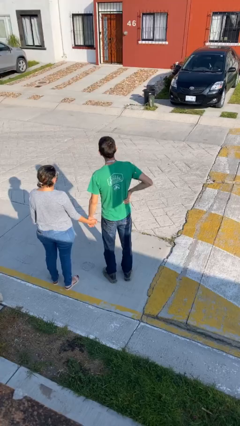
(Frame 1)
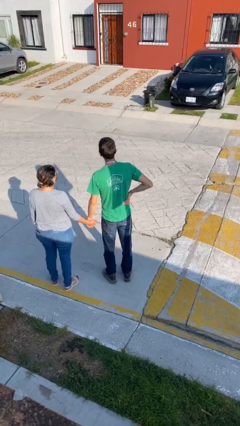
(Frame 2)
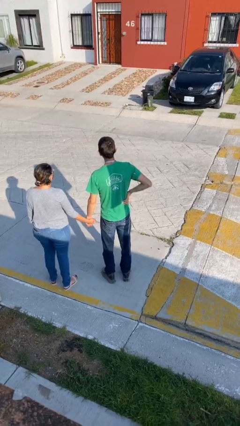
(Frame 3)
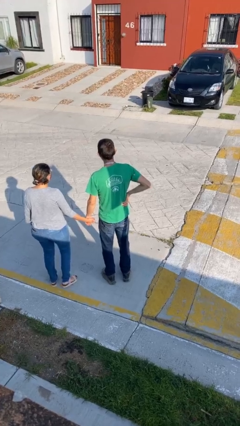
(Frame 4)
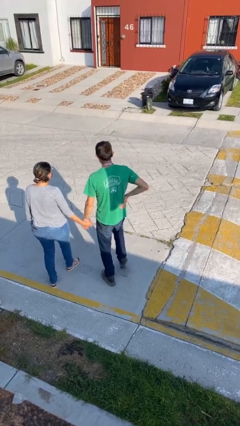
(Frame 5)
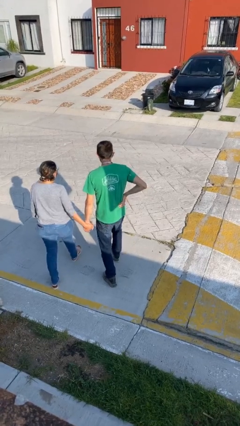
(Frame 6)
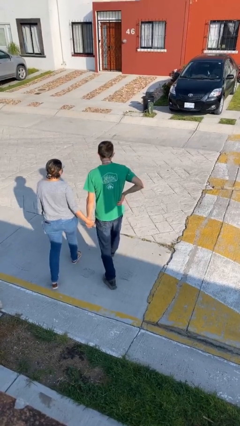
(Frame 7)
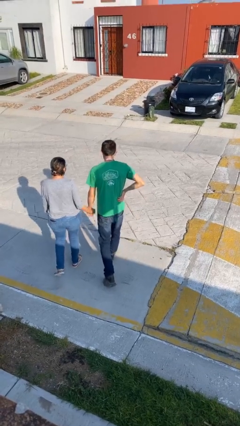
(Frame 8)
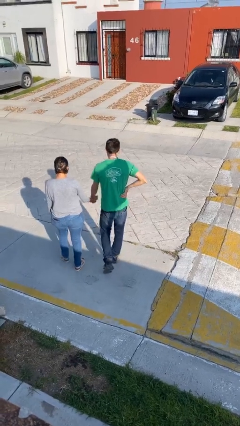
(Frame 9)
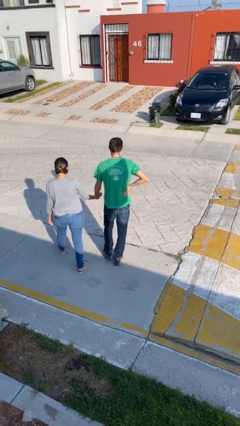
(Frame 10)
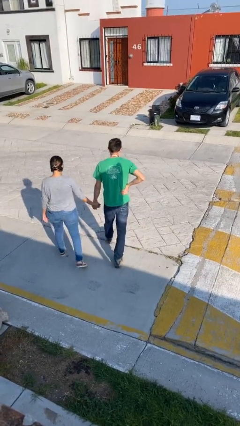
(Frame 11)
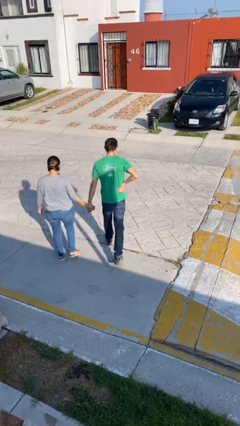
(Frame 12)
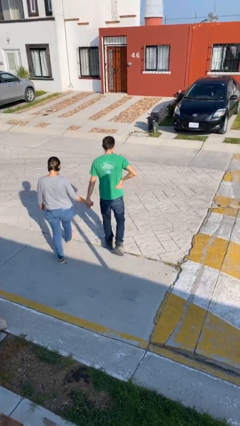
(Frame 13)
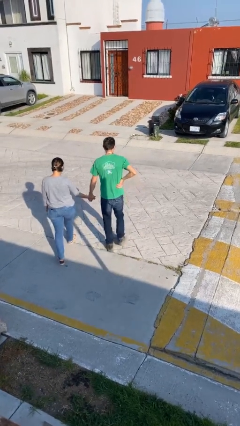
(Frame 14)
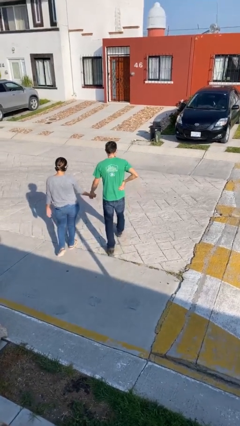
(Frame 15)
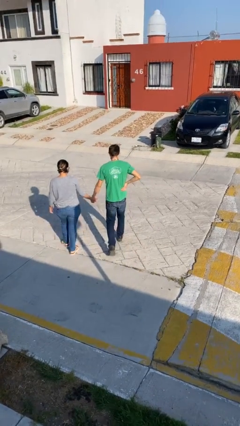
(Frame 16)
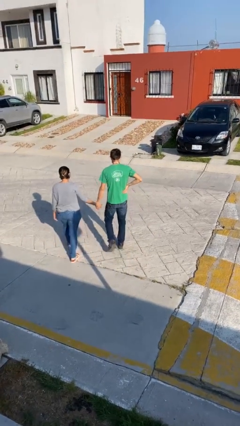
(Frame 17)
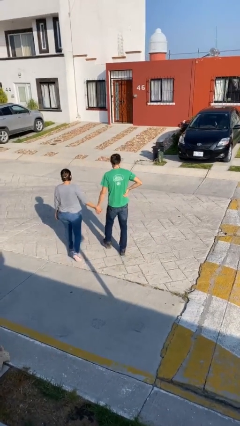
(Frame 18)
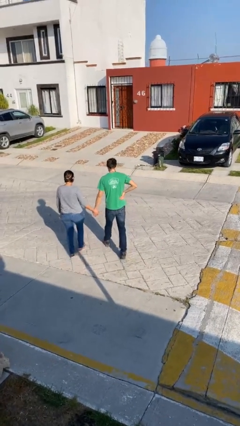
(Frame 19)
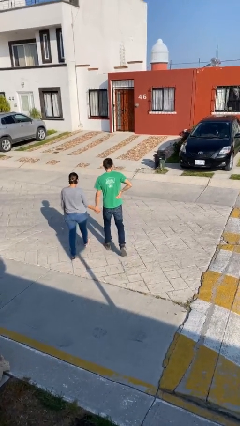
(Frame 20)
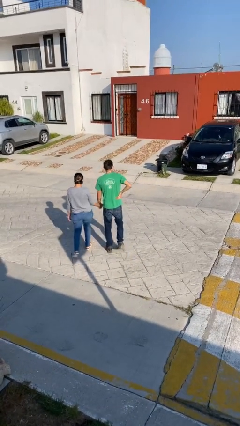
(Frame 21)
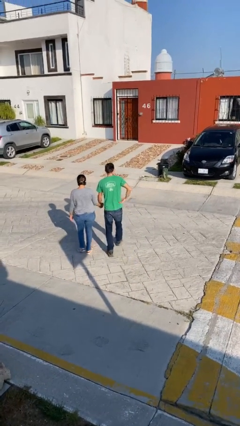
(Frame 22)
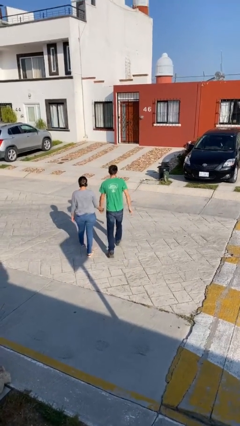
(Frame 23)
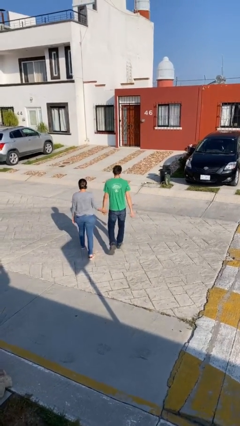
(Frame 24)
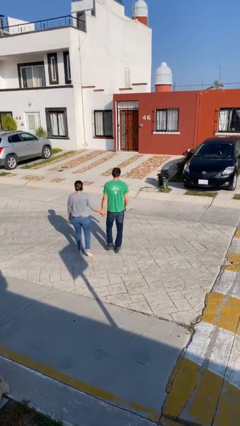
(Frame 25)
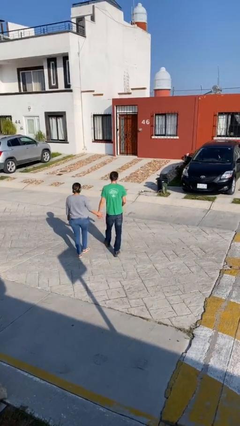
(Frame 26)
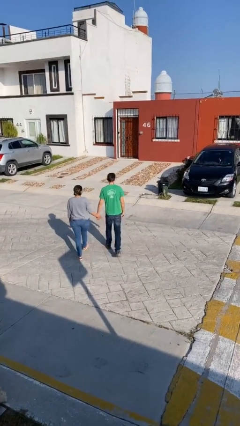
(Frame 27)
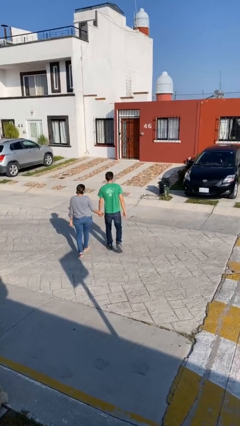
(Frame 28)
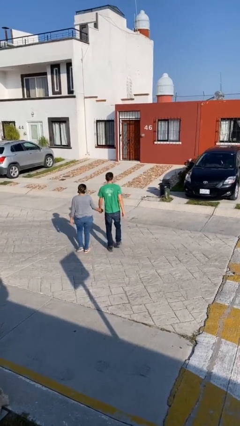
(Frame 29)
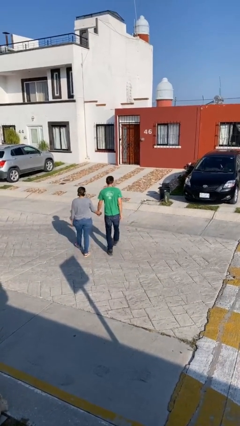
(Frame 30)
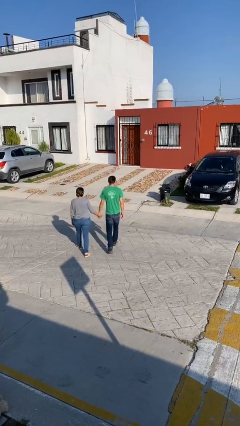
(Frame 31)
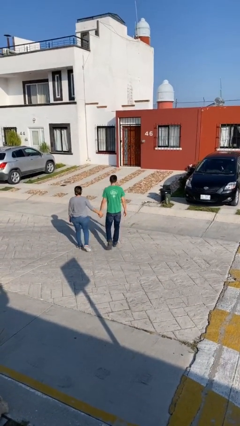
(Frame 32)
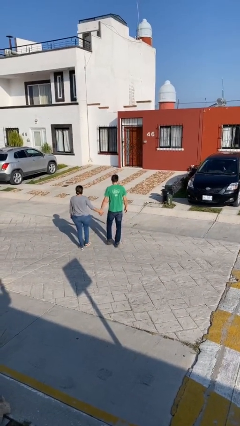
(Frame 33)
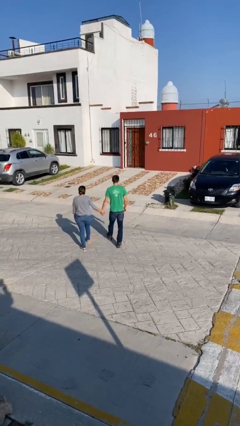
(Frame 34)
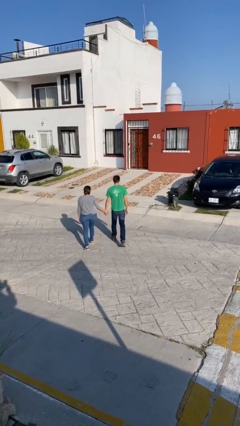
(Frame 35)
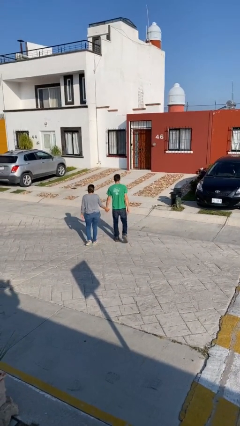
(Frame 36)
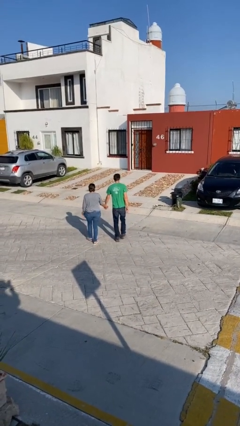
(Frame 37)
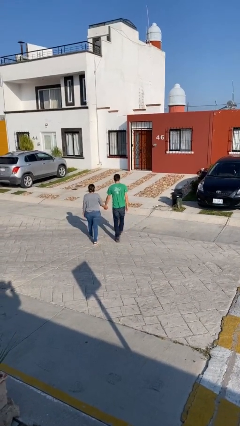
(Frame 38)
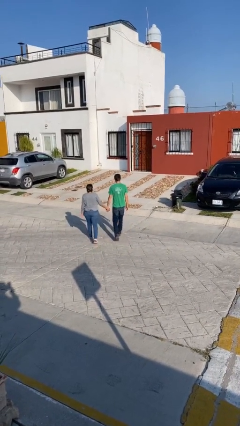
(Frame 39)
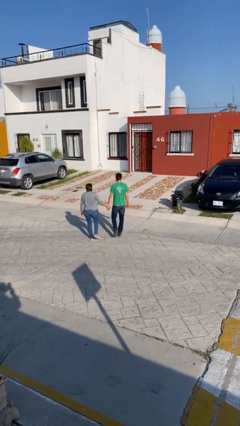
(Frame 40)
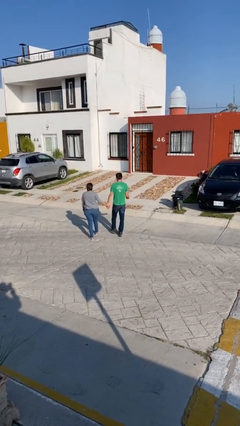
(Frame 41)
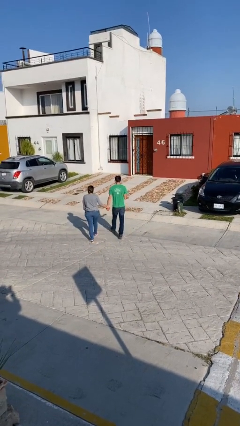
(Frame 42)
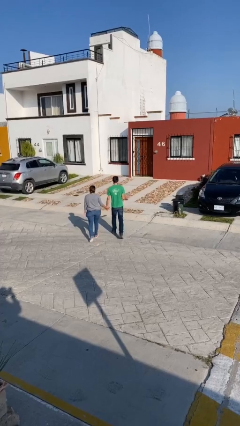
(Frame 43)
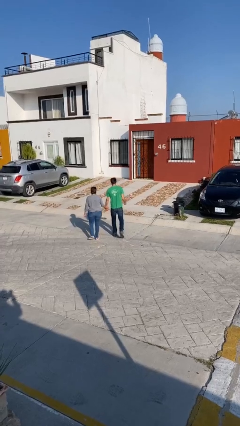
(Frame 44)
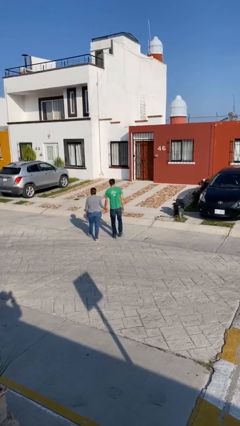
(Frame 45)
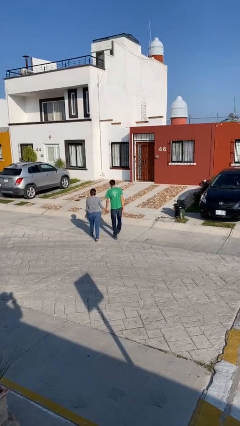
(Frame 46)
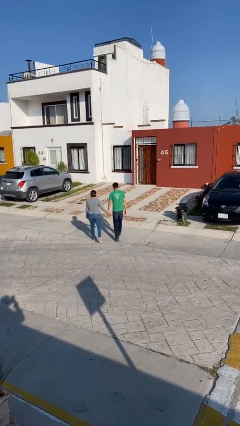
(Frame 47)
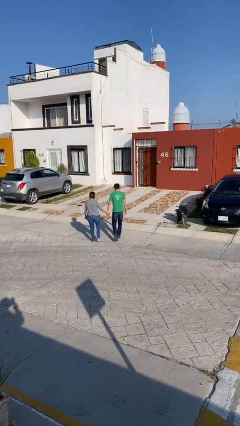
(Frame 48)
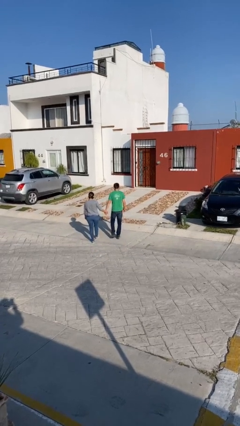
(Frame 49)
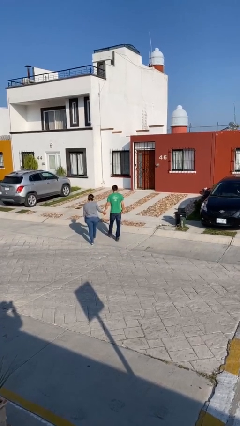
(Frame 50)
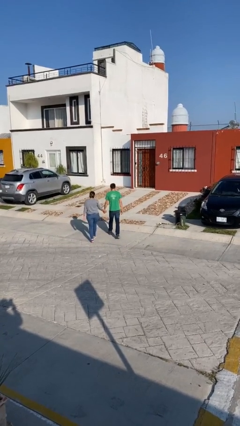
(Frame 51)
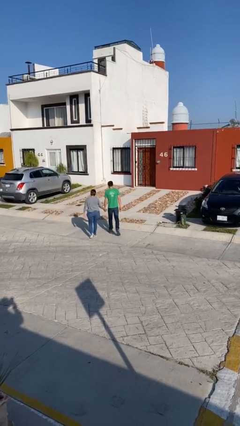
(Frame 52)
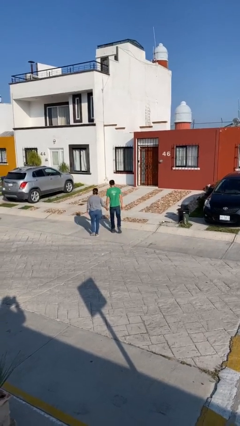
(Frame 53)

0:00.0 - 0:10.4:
person holds hand

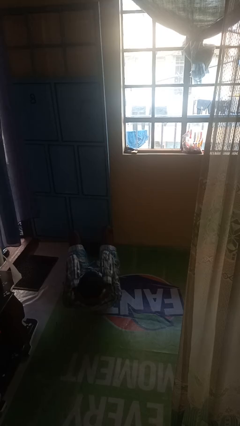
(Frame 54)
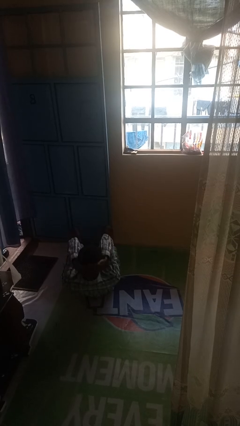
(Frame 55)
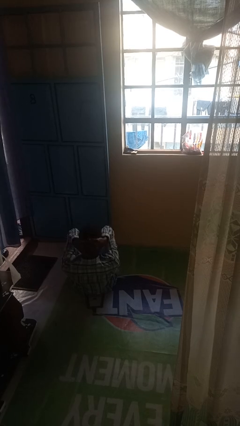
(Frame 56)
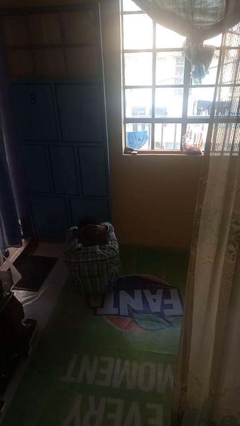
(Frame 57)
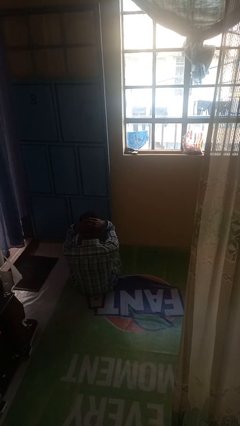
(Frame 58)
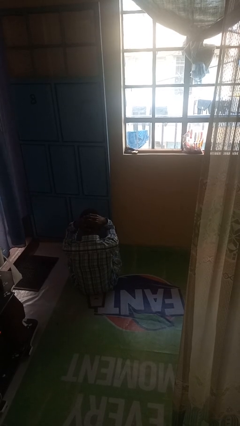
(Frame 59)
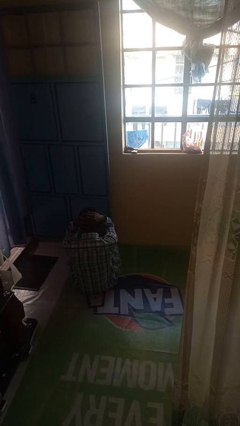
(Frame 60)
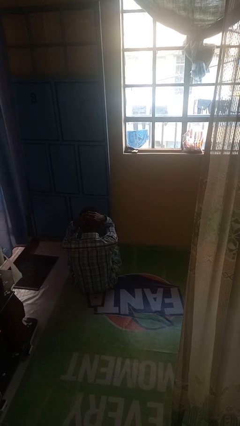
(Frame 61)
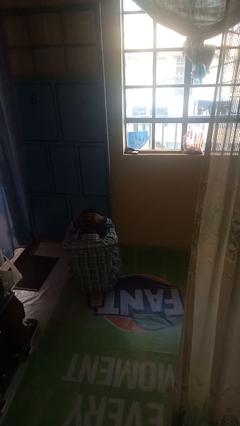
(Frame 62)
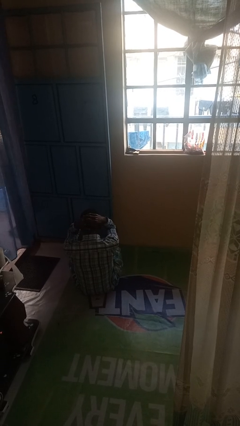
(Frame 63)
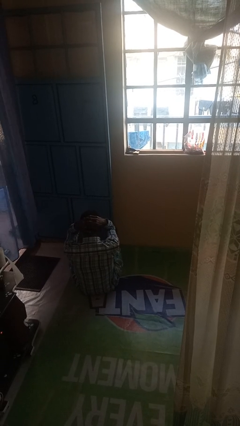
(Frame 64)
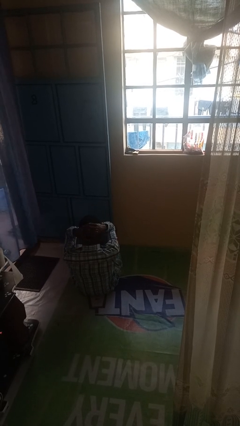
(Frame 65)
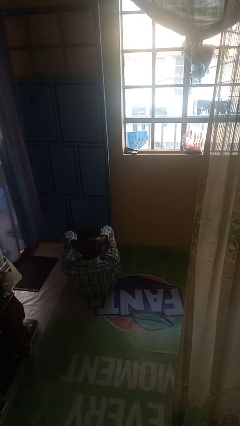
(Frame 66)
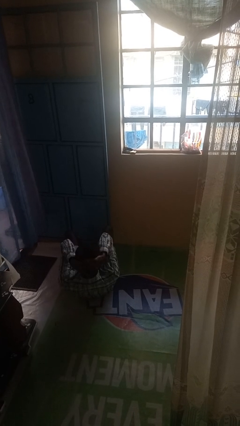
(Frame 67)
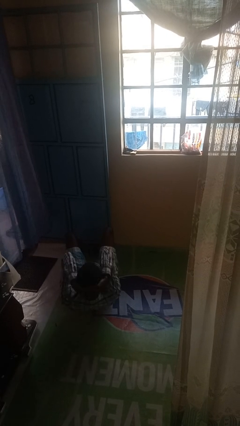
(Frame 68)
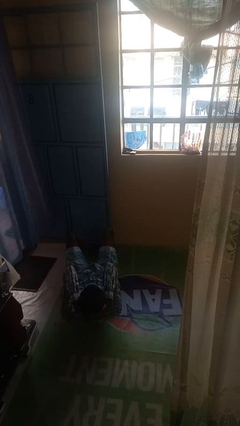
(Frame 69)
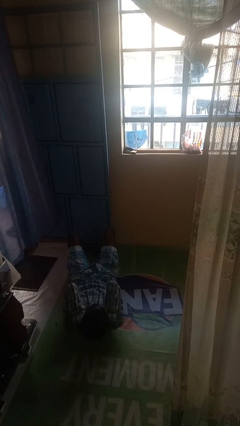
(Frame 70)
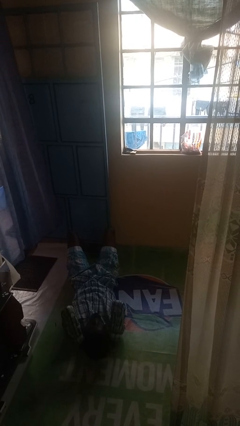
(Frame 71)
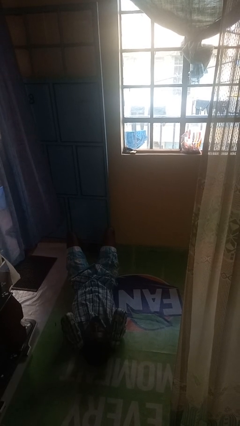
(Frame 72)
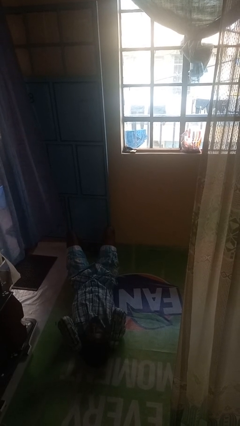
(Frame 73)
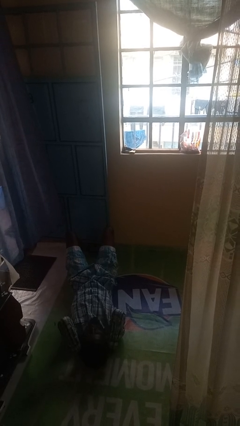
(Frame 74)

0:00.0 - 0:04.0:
person exercises with situp

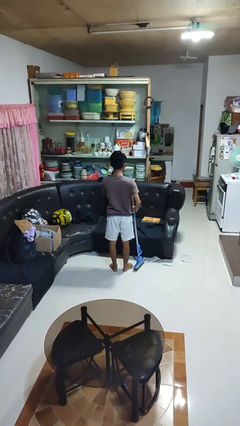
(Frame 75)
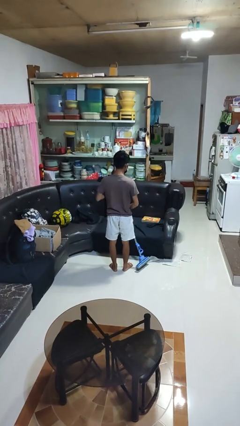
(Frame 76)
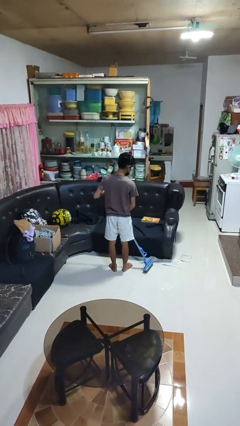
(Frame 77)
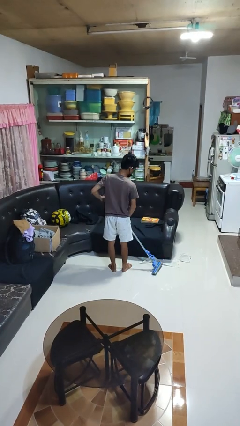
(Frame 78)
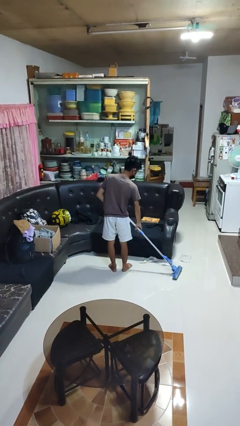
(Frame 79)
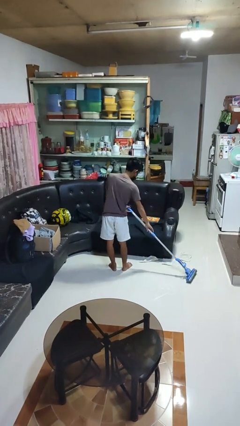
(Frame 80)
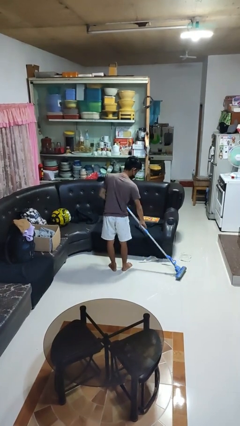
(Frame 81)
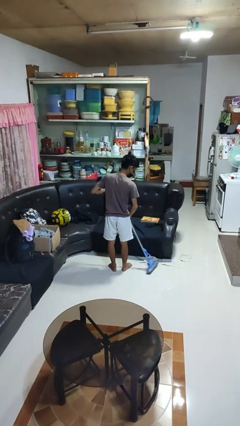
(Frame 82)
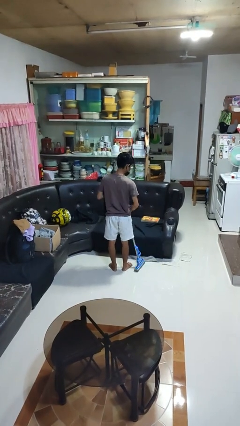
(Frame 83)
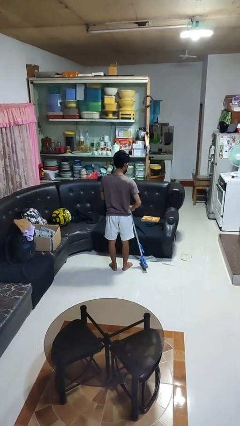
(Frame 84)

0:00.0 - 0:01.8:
person mops

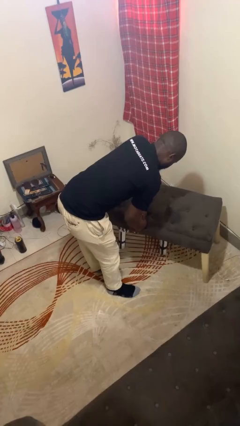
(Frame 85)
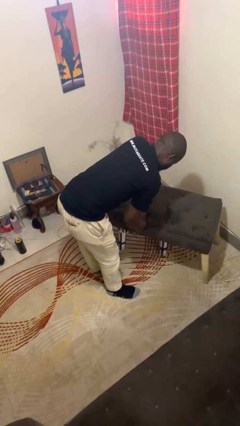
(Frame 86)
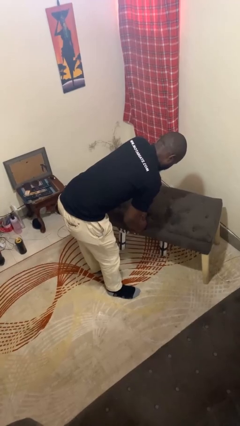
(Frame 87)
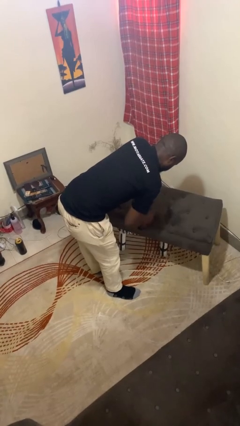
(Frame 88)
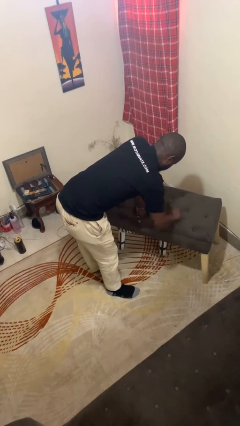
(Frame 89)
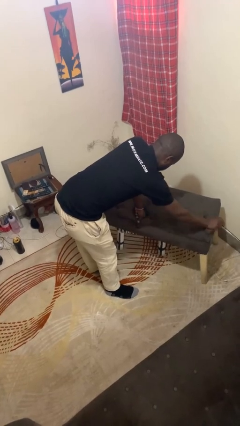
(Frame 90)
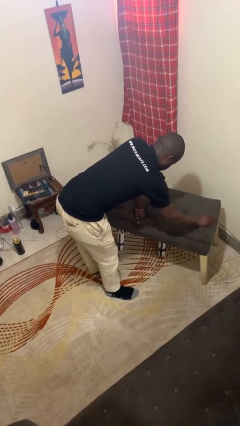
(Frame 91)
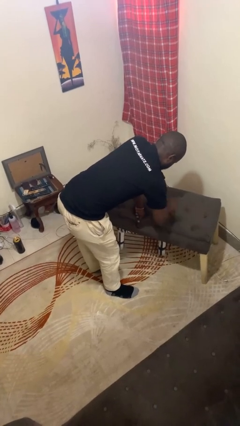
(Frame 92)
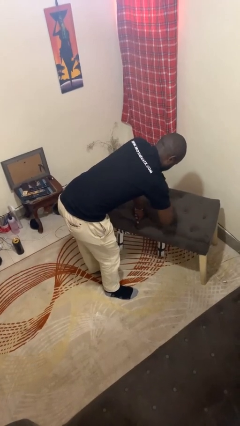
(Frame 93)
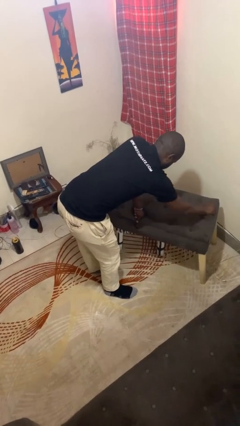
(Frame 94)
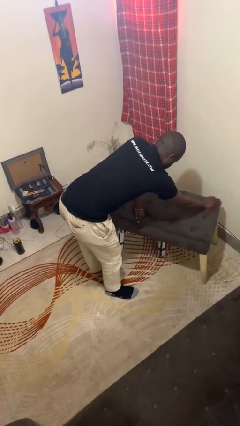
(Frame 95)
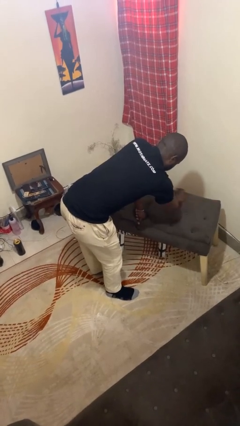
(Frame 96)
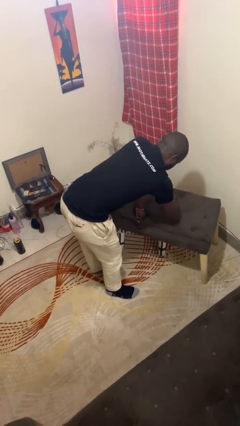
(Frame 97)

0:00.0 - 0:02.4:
person cleans table with rag
